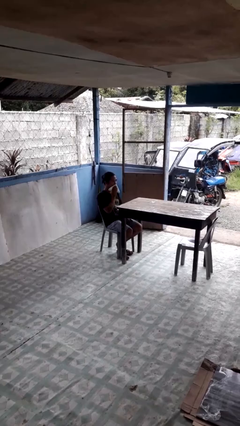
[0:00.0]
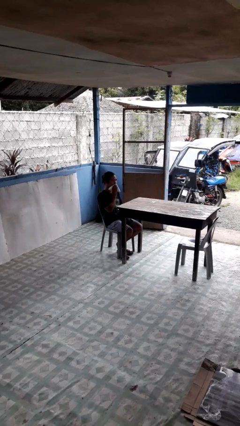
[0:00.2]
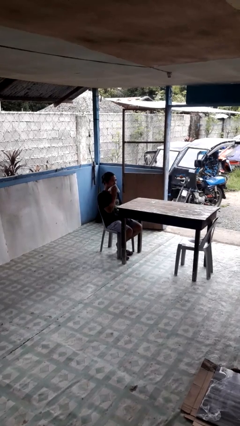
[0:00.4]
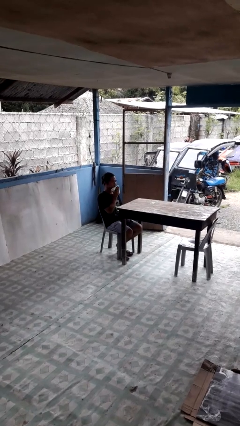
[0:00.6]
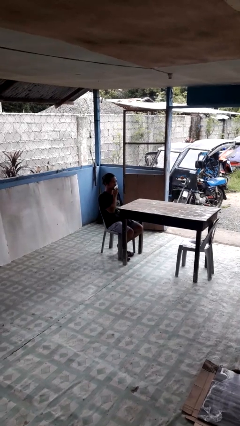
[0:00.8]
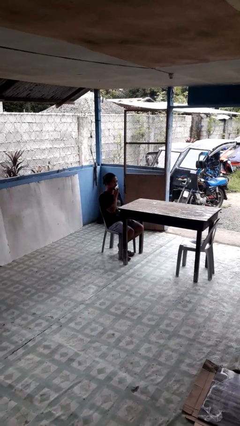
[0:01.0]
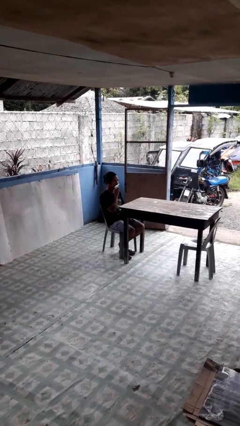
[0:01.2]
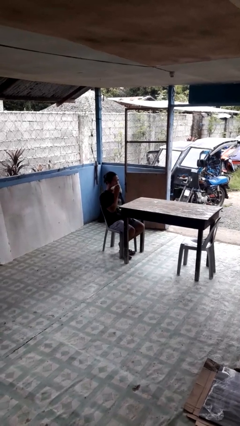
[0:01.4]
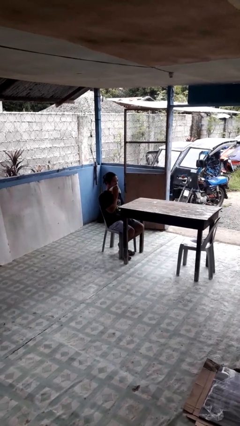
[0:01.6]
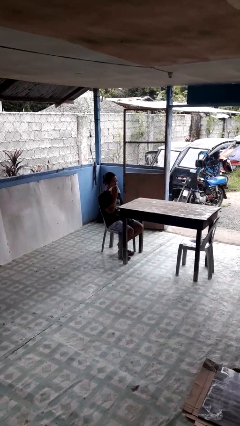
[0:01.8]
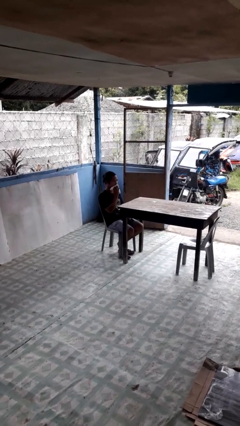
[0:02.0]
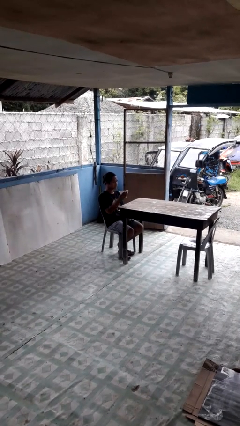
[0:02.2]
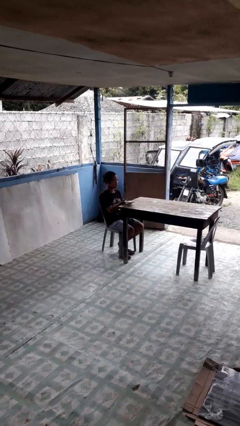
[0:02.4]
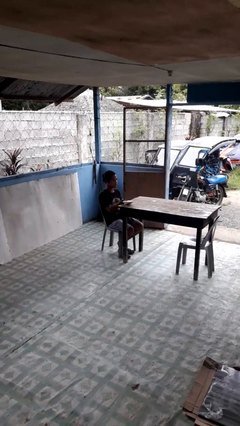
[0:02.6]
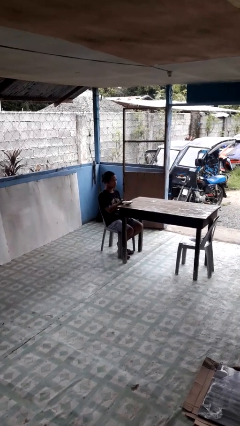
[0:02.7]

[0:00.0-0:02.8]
person wipes mouth with napkin

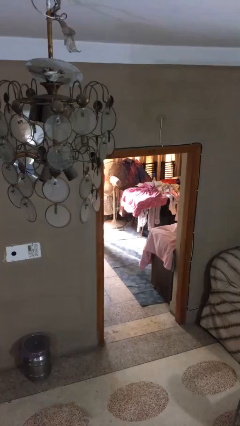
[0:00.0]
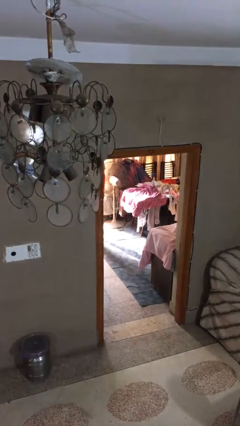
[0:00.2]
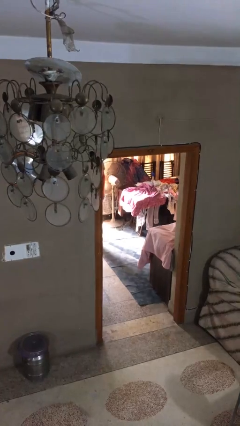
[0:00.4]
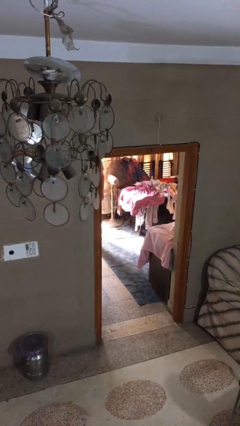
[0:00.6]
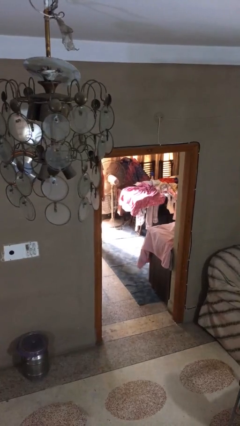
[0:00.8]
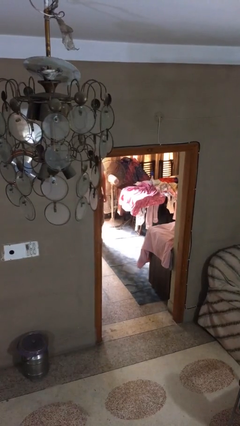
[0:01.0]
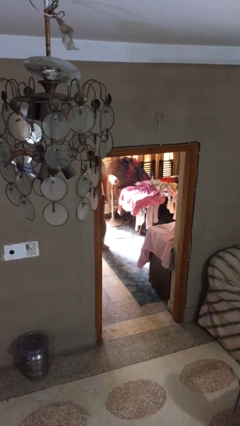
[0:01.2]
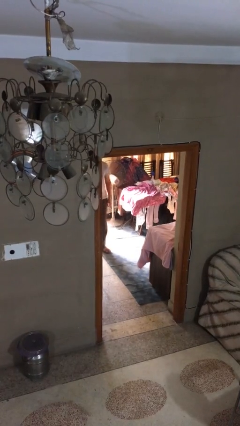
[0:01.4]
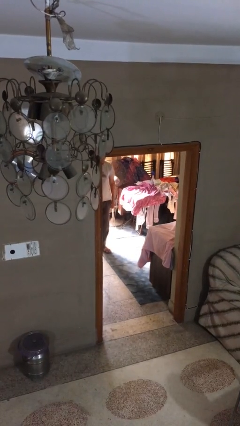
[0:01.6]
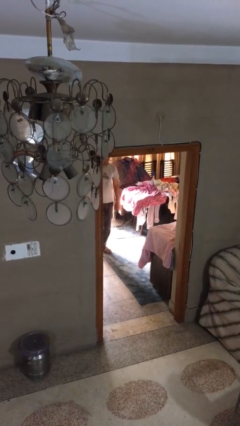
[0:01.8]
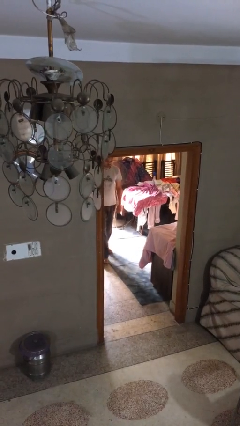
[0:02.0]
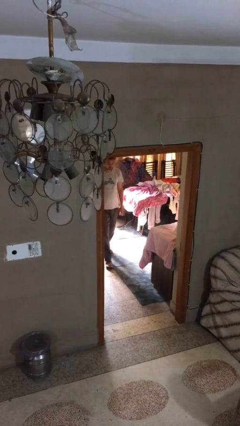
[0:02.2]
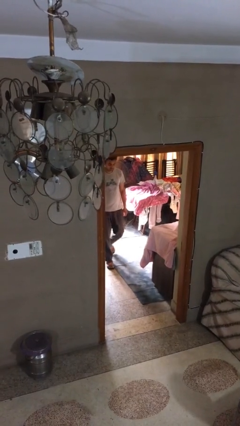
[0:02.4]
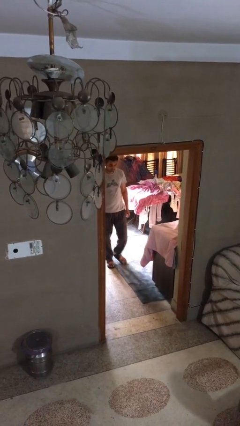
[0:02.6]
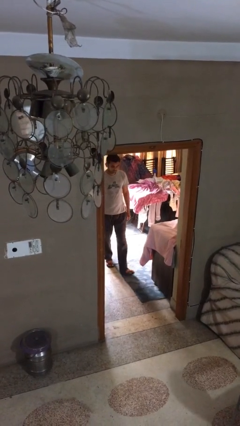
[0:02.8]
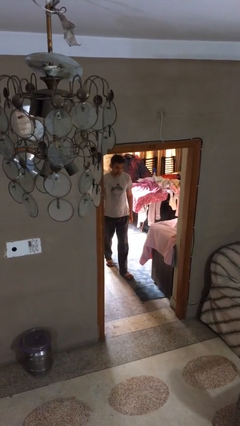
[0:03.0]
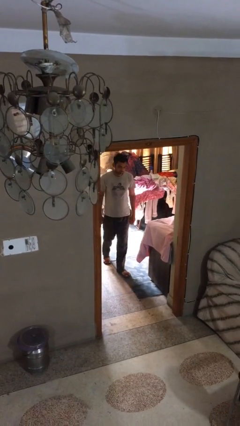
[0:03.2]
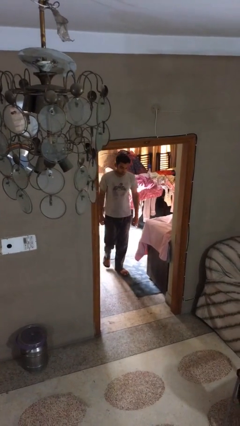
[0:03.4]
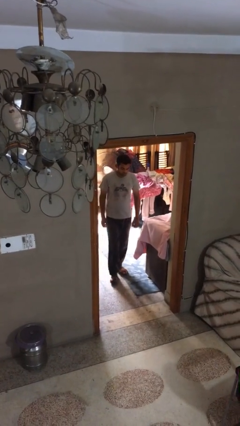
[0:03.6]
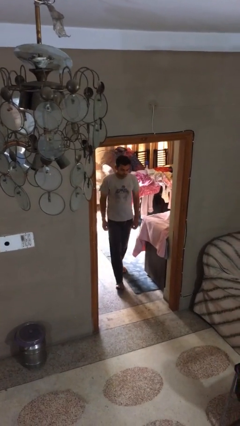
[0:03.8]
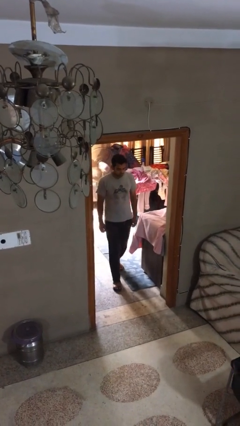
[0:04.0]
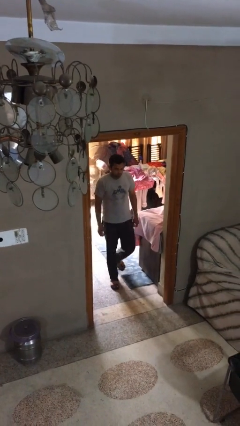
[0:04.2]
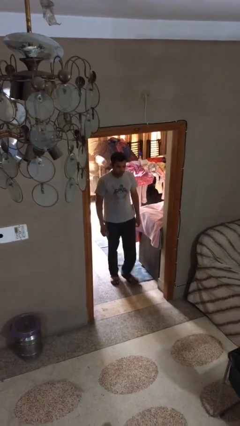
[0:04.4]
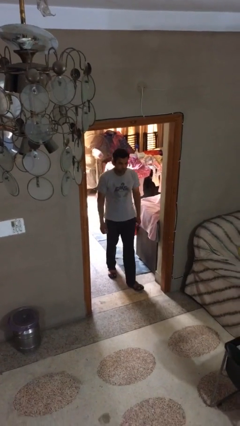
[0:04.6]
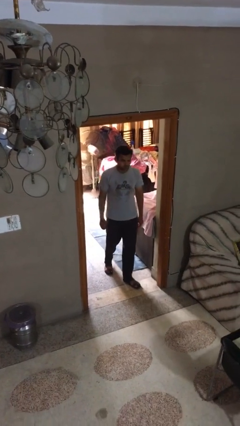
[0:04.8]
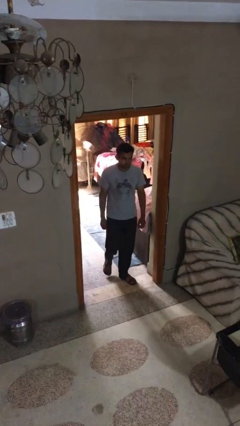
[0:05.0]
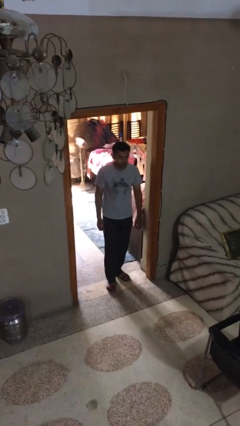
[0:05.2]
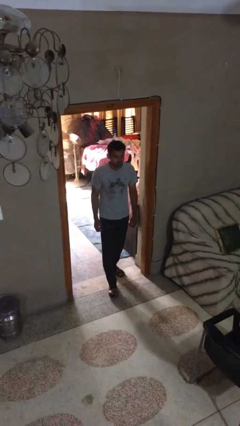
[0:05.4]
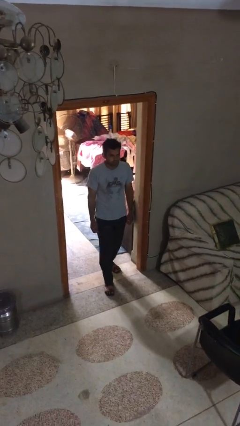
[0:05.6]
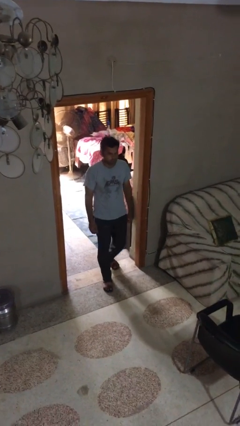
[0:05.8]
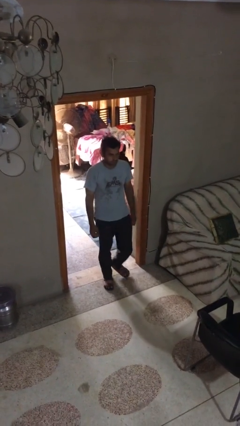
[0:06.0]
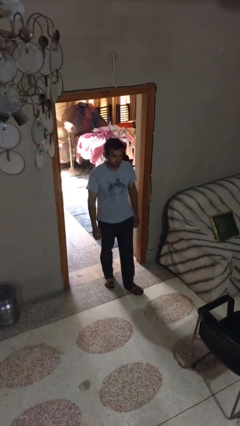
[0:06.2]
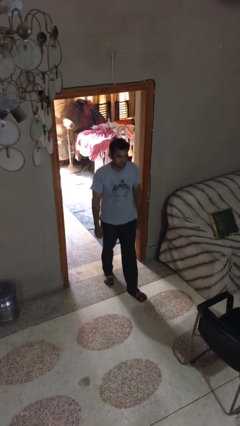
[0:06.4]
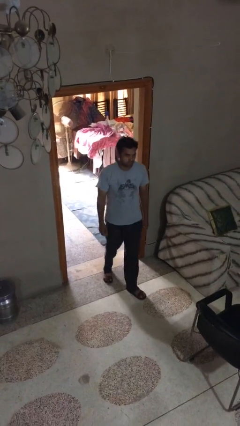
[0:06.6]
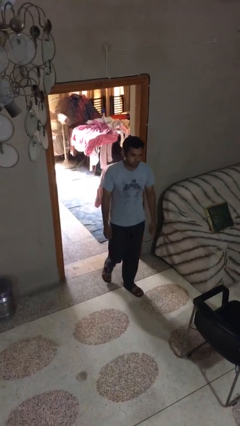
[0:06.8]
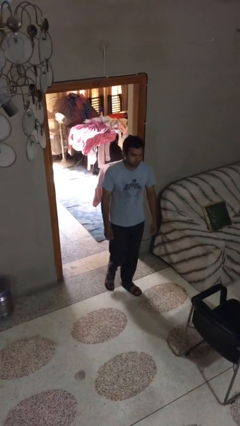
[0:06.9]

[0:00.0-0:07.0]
person enters scene through structure

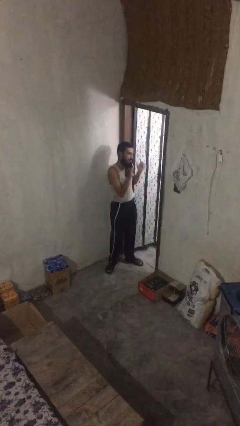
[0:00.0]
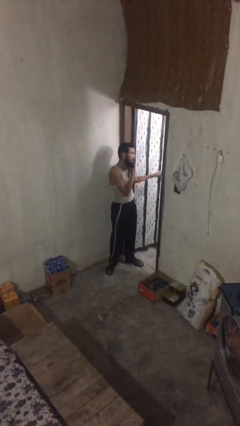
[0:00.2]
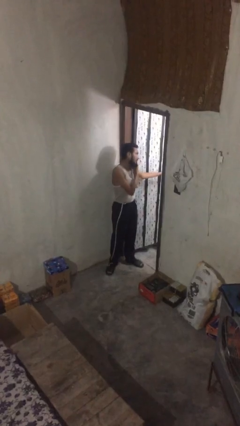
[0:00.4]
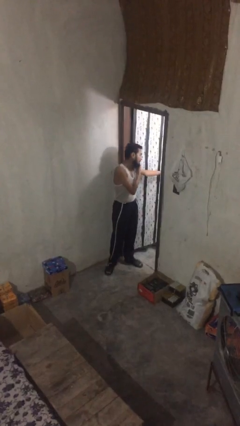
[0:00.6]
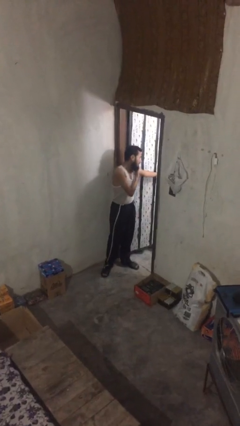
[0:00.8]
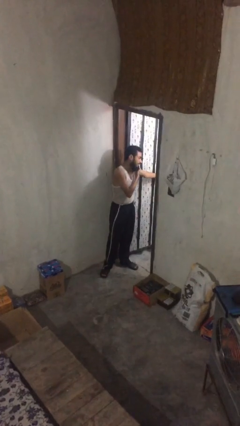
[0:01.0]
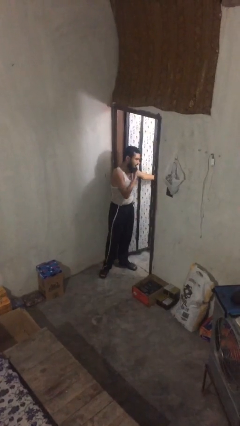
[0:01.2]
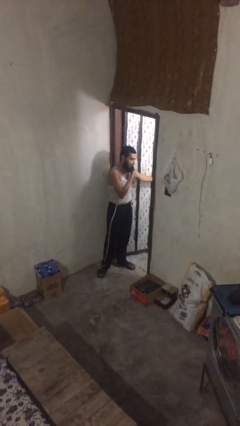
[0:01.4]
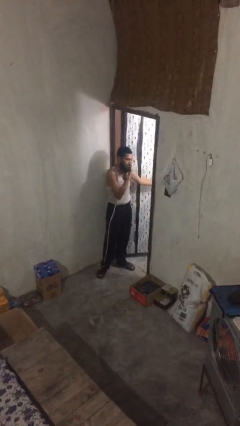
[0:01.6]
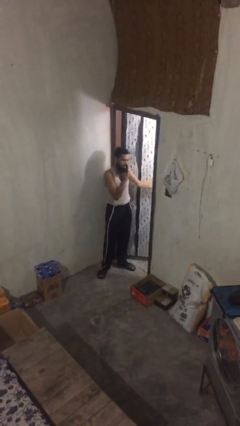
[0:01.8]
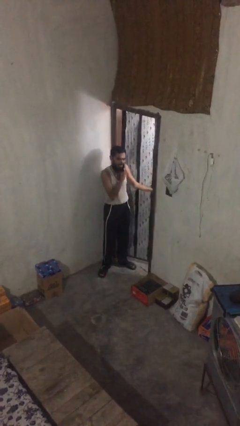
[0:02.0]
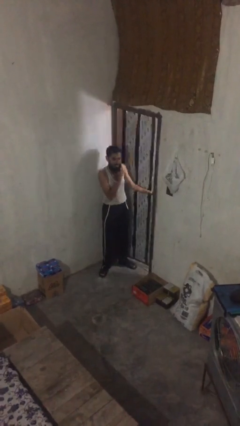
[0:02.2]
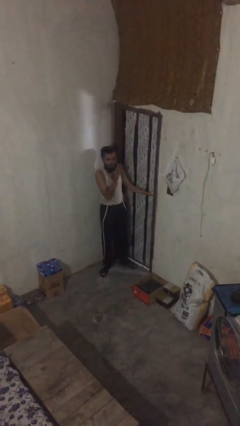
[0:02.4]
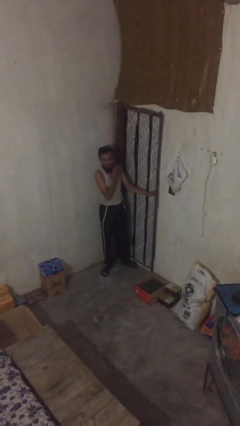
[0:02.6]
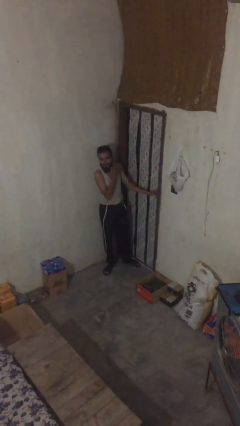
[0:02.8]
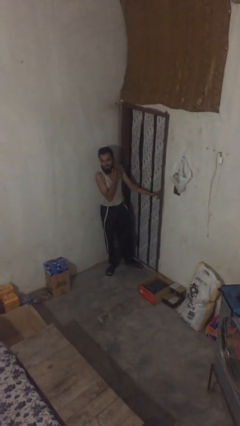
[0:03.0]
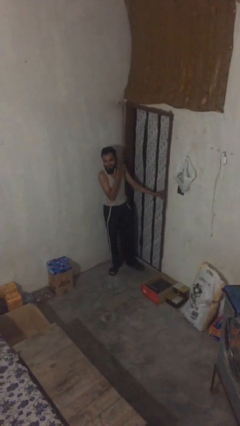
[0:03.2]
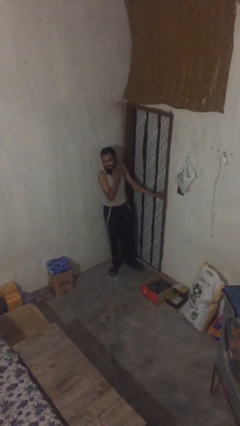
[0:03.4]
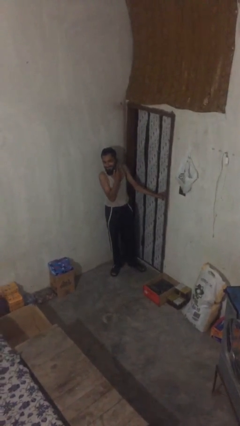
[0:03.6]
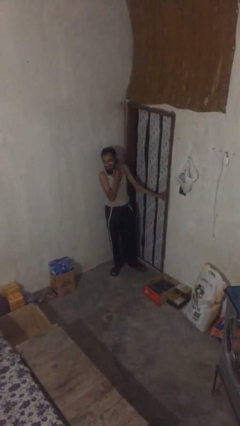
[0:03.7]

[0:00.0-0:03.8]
person closes facility door

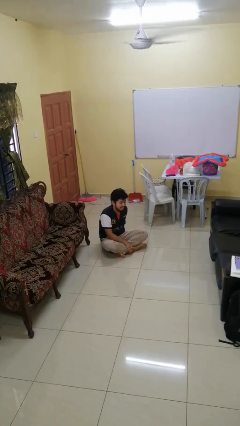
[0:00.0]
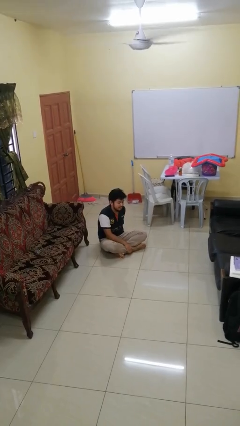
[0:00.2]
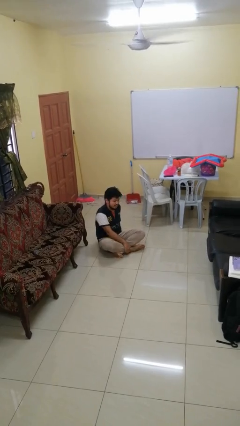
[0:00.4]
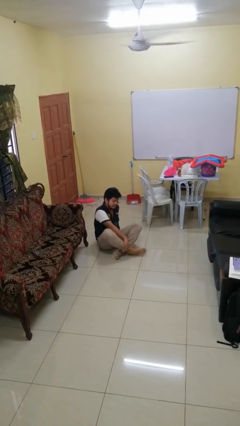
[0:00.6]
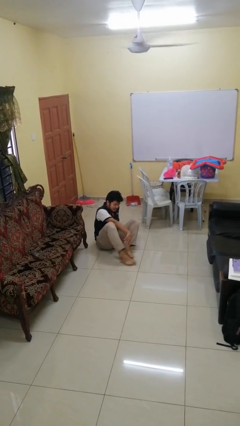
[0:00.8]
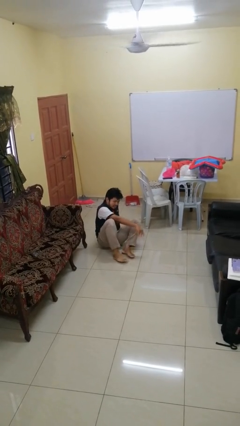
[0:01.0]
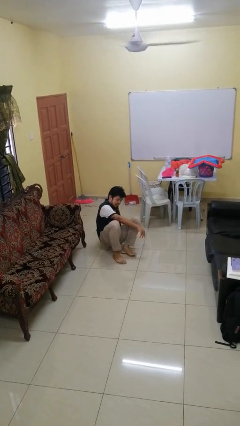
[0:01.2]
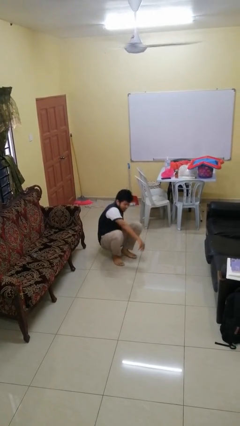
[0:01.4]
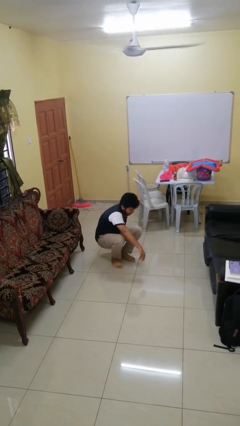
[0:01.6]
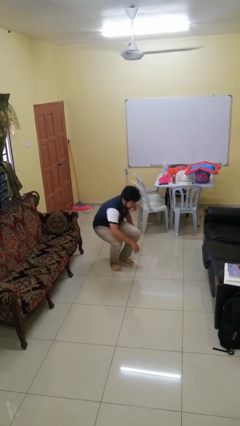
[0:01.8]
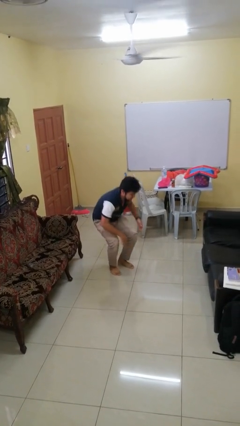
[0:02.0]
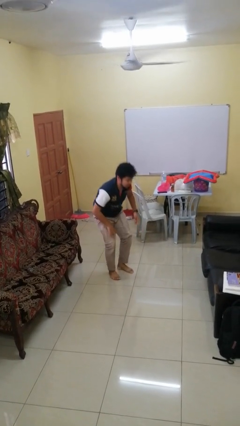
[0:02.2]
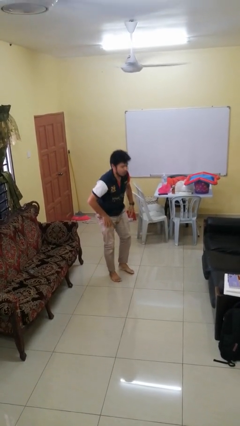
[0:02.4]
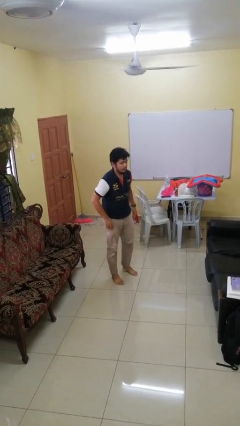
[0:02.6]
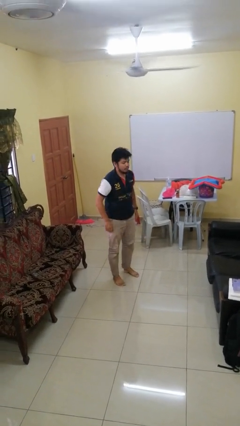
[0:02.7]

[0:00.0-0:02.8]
person stands up from floor

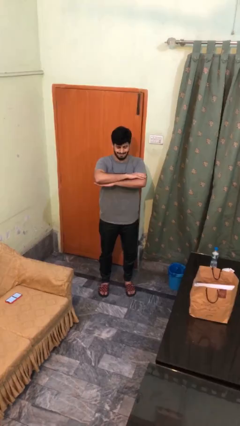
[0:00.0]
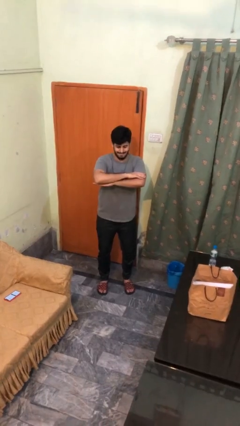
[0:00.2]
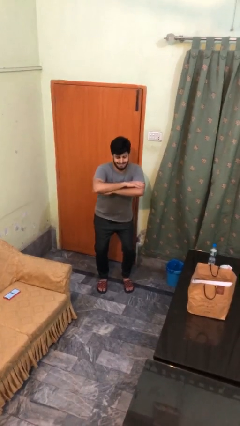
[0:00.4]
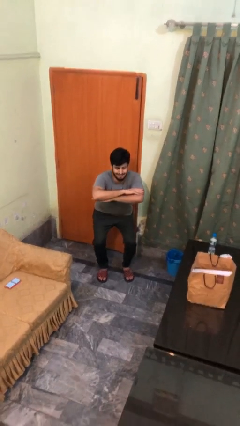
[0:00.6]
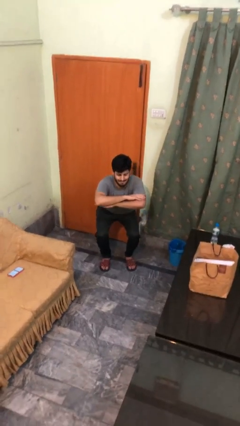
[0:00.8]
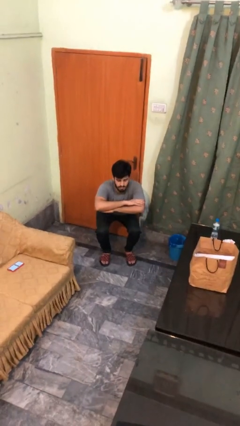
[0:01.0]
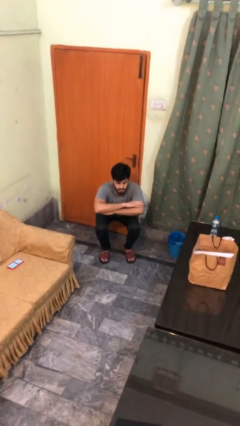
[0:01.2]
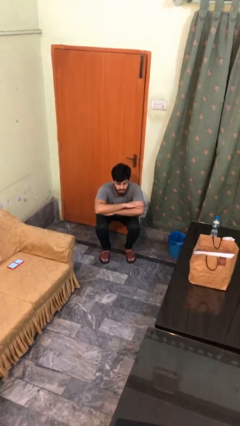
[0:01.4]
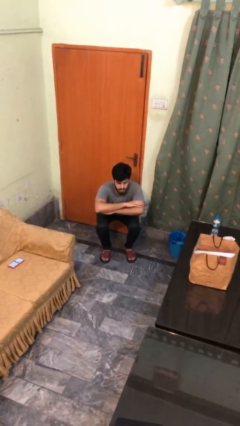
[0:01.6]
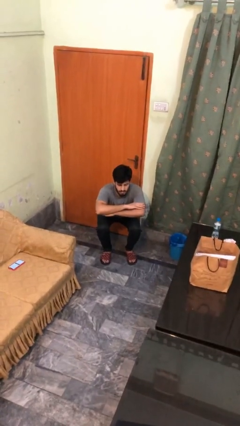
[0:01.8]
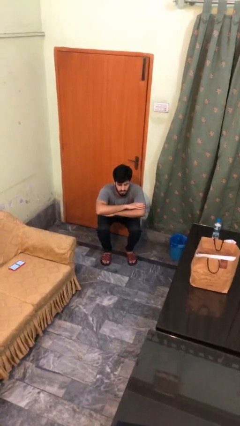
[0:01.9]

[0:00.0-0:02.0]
person squats
